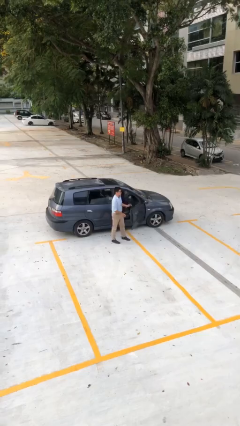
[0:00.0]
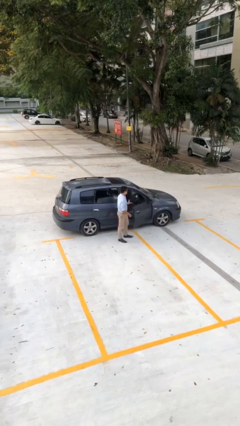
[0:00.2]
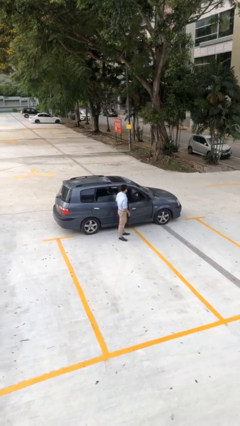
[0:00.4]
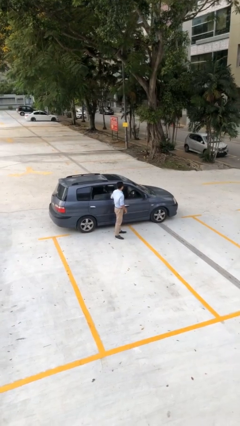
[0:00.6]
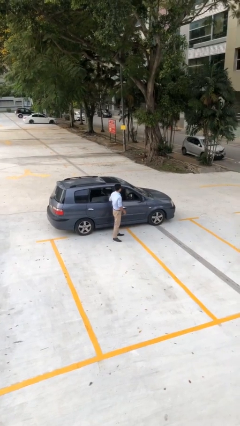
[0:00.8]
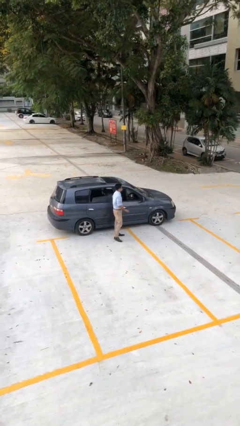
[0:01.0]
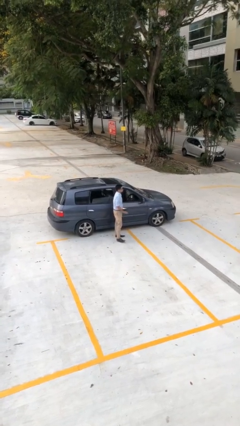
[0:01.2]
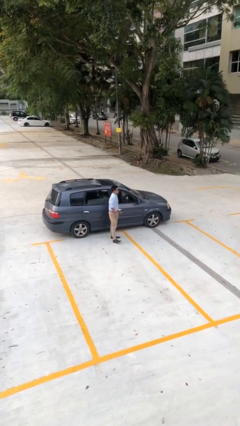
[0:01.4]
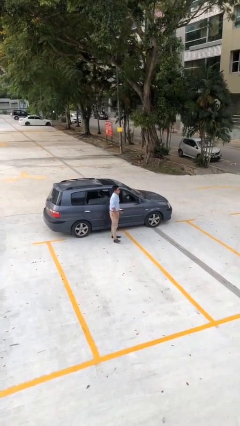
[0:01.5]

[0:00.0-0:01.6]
person closes car door

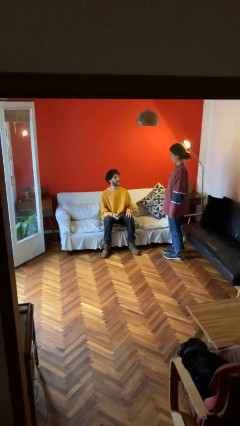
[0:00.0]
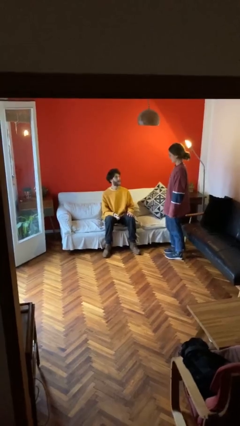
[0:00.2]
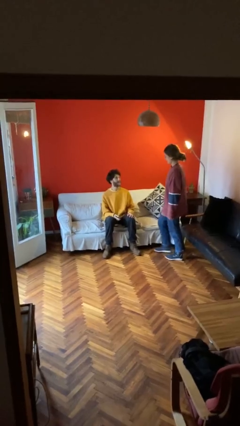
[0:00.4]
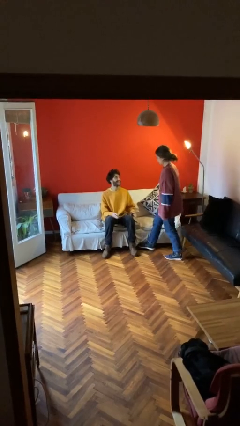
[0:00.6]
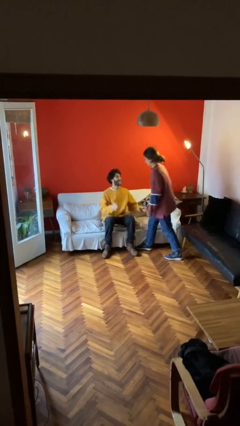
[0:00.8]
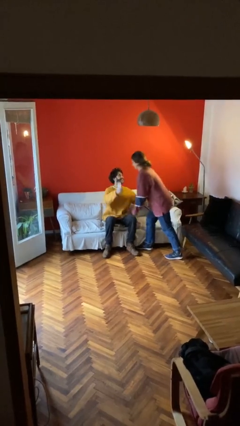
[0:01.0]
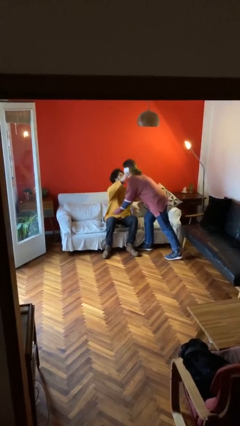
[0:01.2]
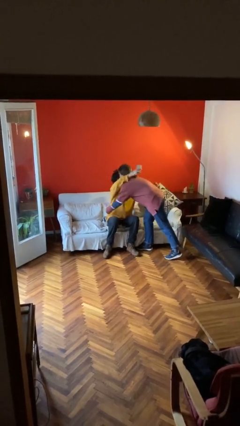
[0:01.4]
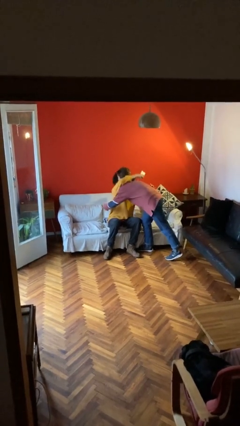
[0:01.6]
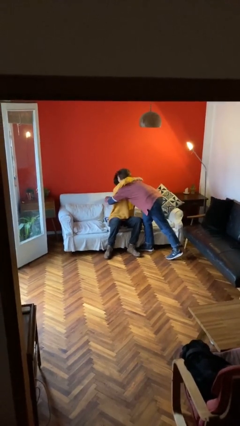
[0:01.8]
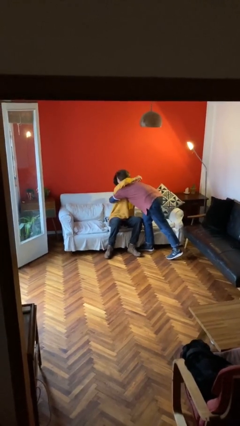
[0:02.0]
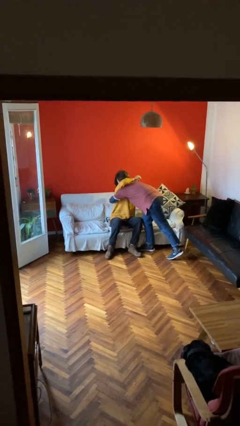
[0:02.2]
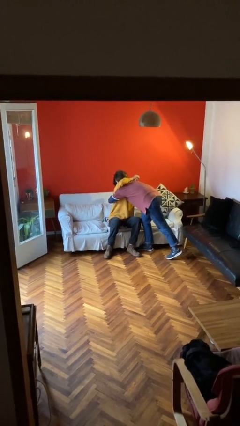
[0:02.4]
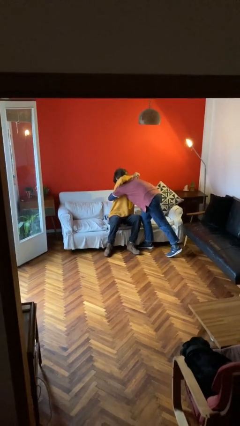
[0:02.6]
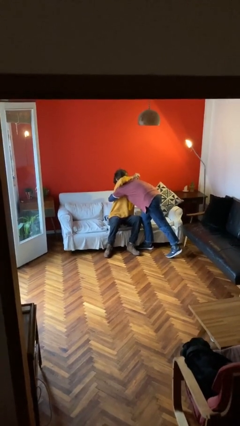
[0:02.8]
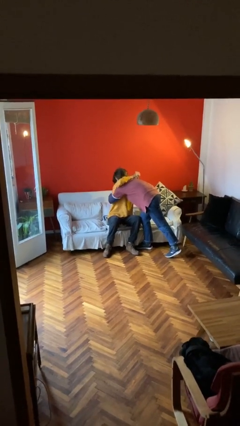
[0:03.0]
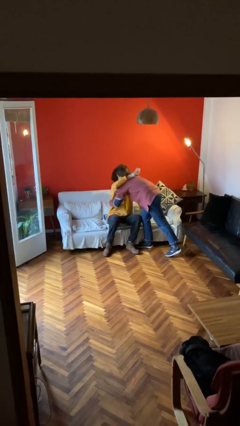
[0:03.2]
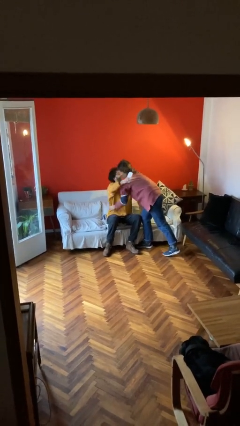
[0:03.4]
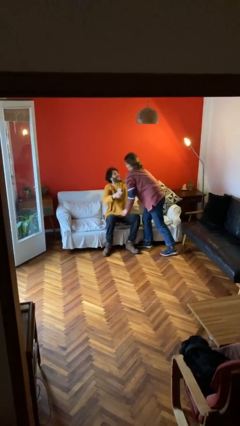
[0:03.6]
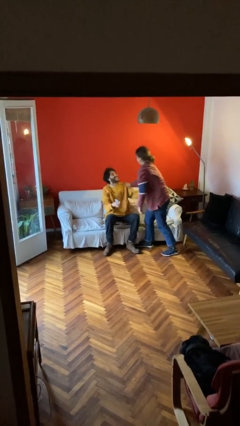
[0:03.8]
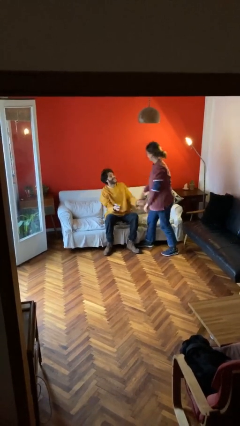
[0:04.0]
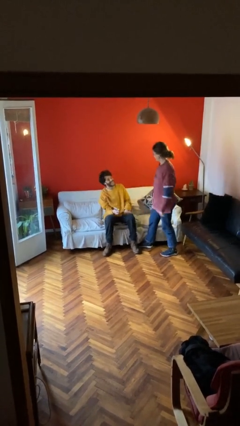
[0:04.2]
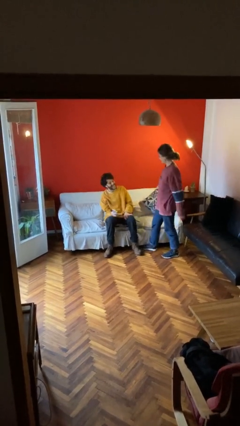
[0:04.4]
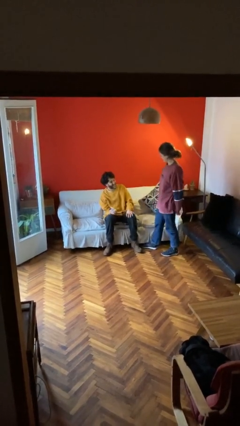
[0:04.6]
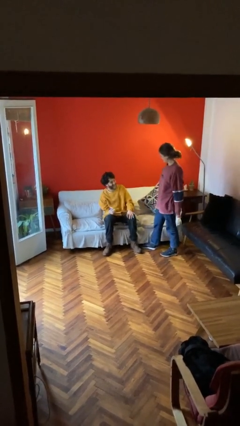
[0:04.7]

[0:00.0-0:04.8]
person embraces person

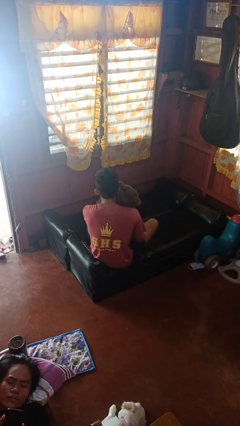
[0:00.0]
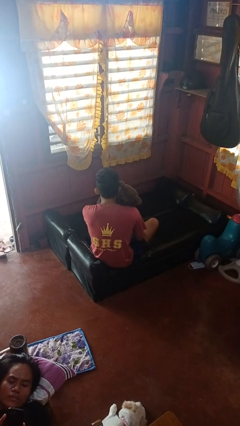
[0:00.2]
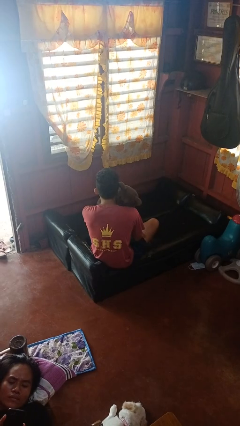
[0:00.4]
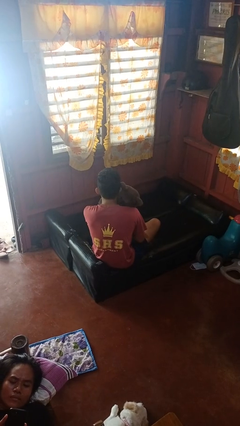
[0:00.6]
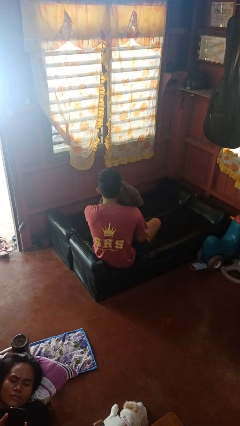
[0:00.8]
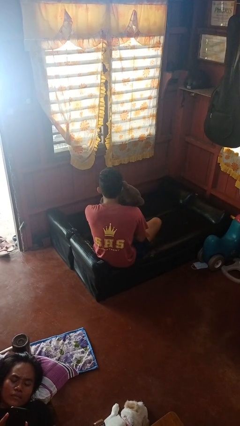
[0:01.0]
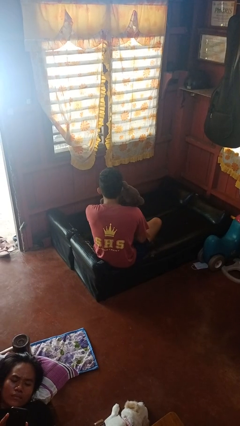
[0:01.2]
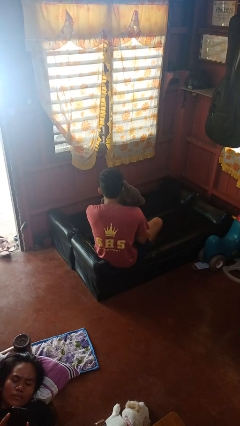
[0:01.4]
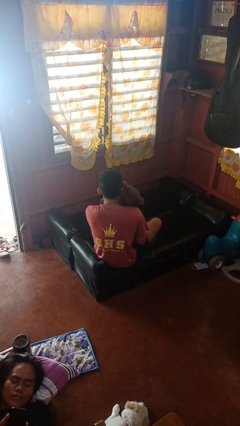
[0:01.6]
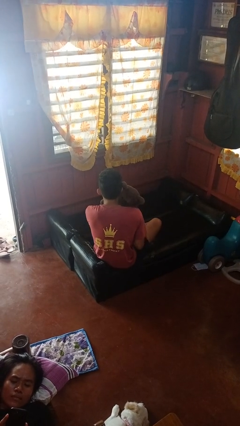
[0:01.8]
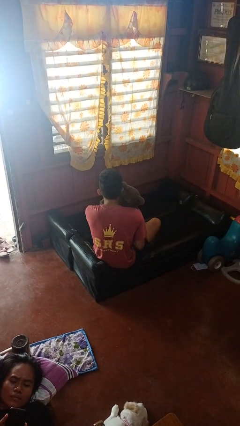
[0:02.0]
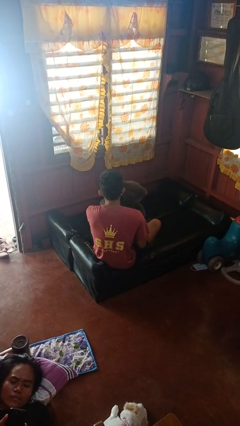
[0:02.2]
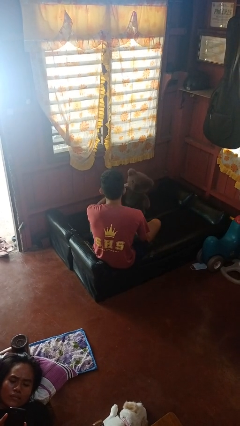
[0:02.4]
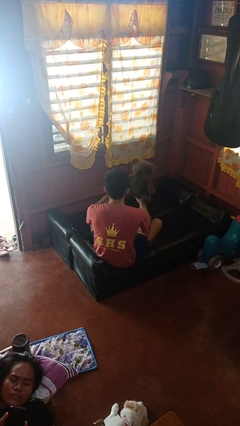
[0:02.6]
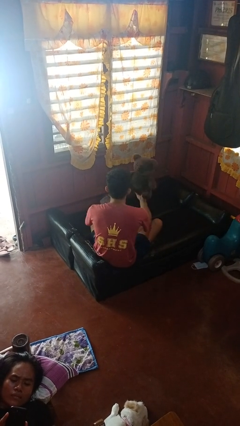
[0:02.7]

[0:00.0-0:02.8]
person hugs stuffed animal

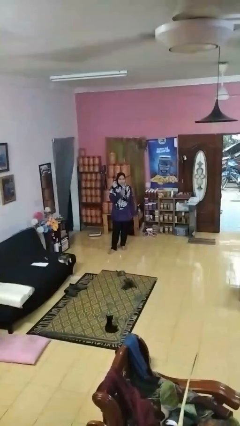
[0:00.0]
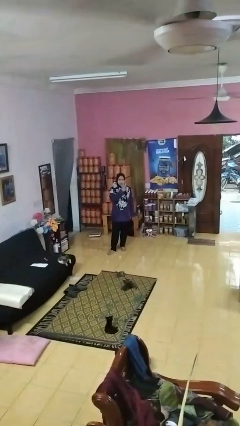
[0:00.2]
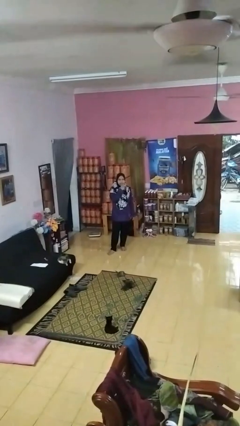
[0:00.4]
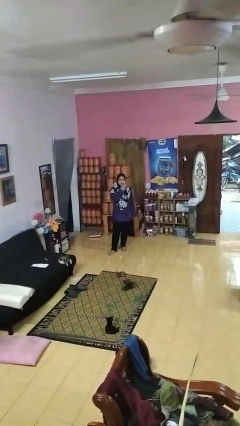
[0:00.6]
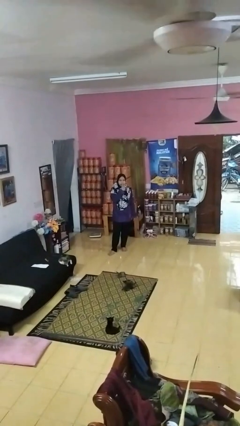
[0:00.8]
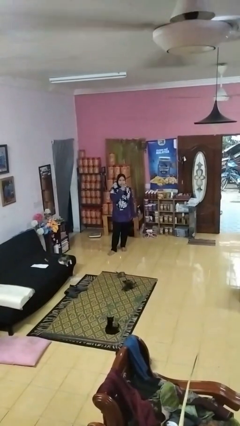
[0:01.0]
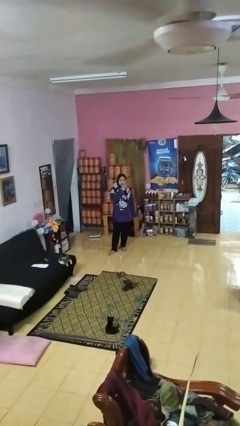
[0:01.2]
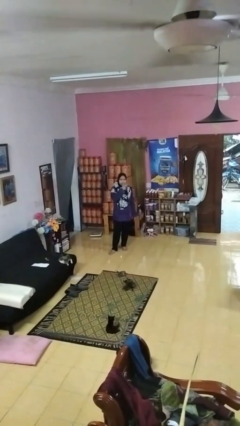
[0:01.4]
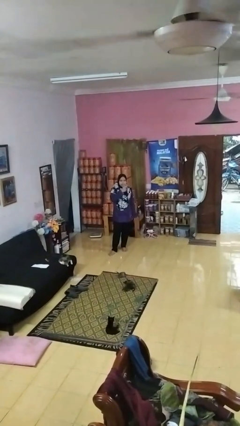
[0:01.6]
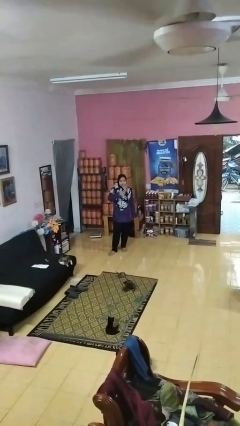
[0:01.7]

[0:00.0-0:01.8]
person gestures be quiet

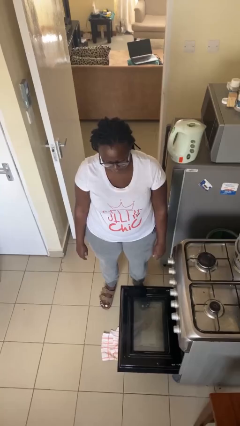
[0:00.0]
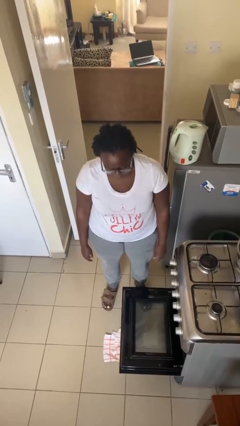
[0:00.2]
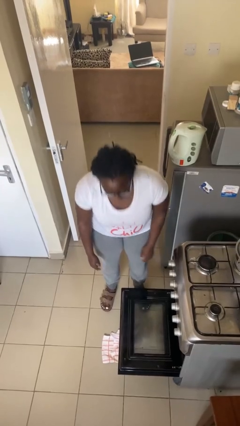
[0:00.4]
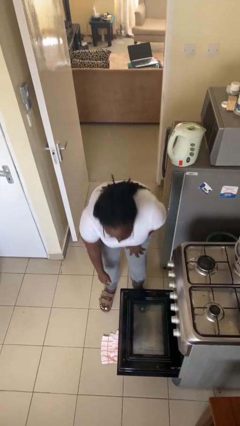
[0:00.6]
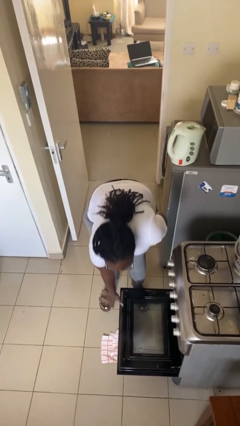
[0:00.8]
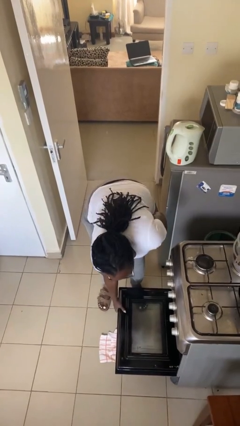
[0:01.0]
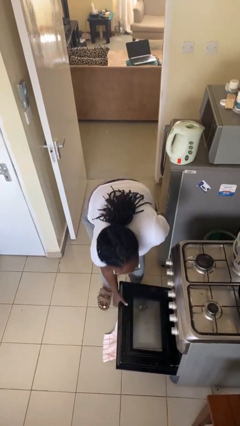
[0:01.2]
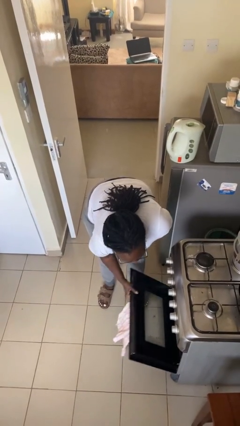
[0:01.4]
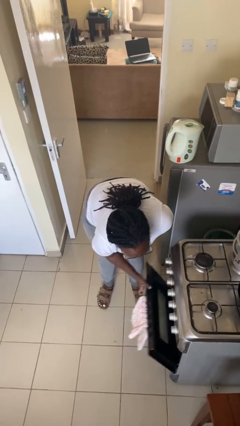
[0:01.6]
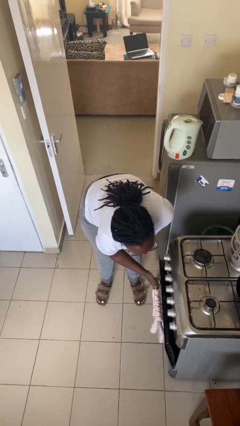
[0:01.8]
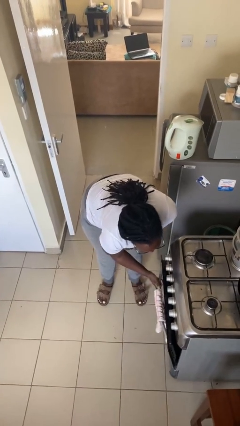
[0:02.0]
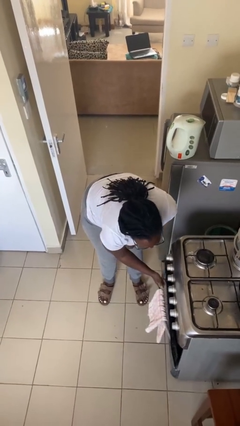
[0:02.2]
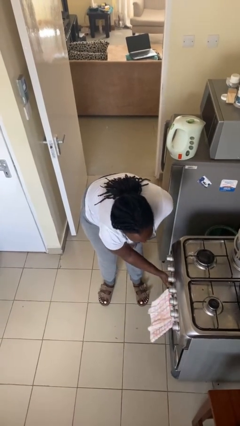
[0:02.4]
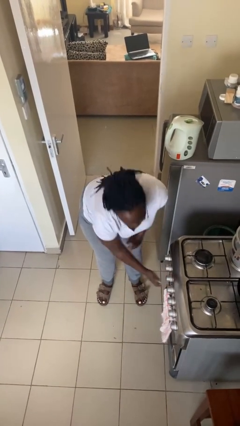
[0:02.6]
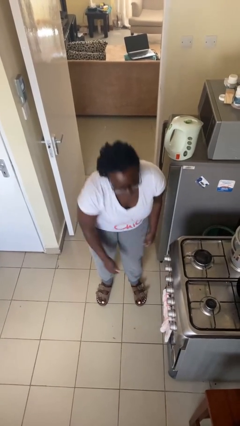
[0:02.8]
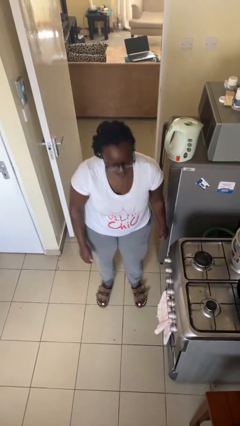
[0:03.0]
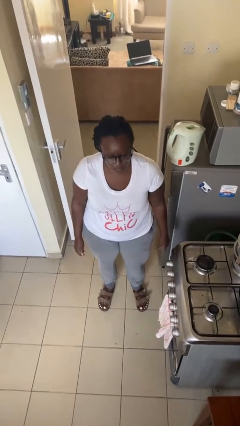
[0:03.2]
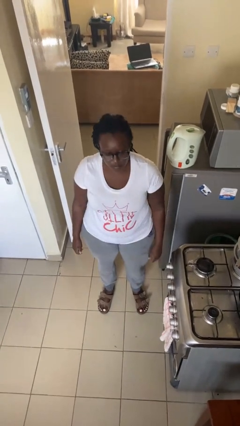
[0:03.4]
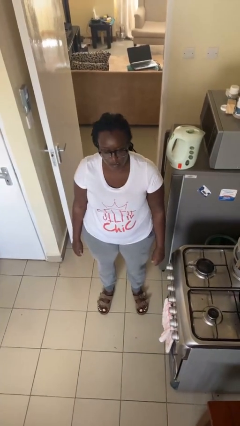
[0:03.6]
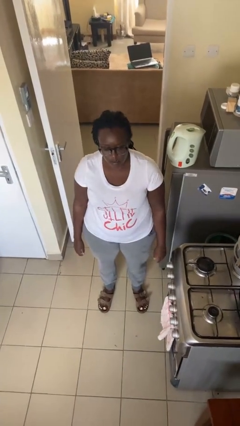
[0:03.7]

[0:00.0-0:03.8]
person closes oven door

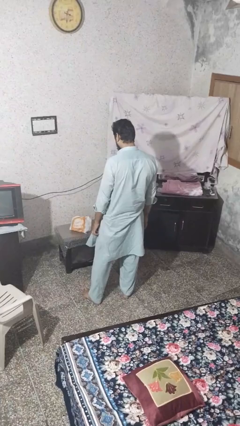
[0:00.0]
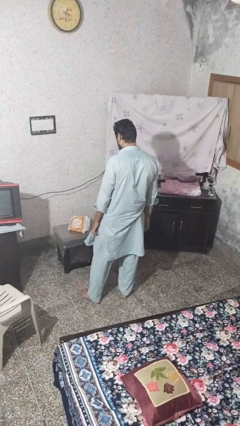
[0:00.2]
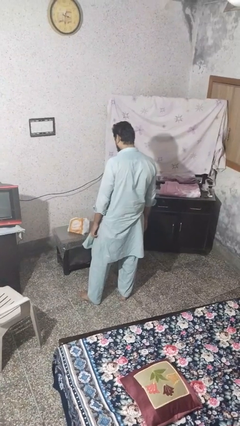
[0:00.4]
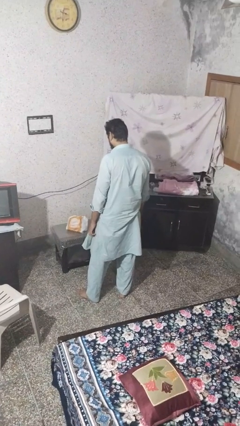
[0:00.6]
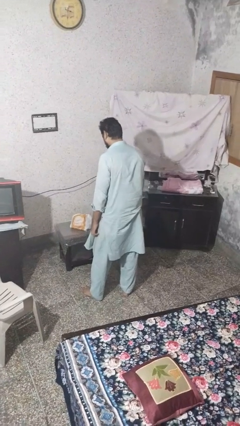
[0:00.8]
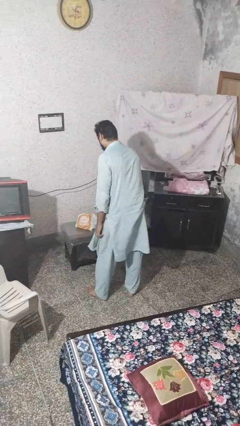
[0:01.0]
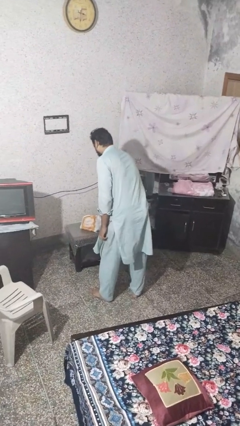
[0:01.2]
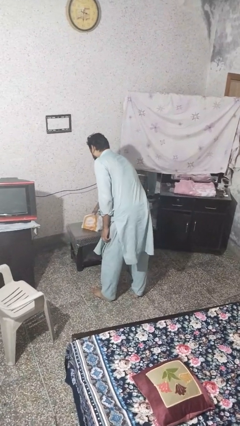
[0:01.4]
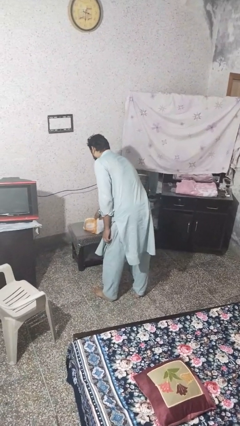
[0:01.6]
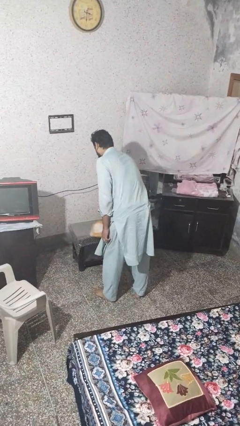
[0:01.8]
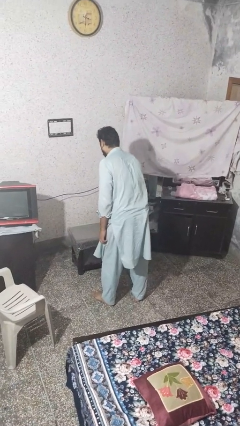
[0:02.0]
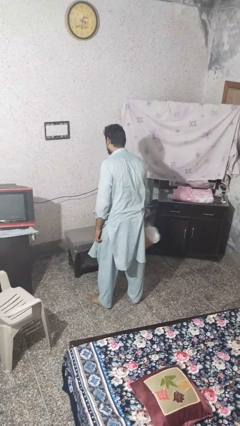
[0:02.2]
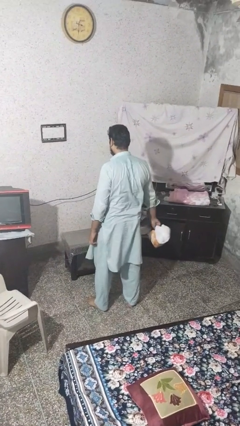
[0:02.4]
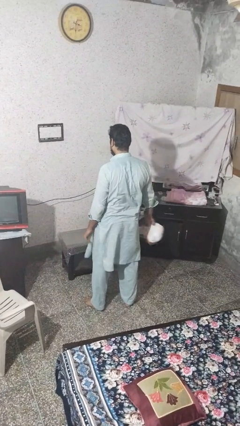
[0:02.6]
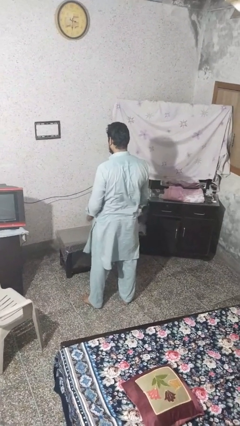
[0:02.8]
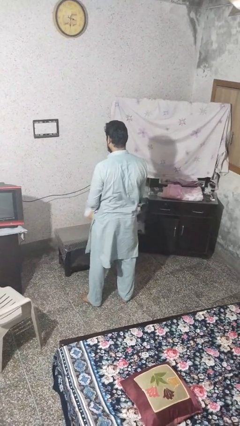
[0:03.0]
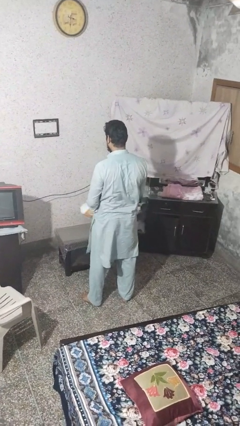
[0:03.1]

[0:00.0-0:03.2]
person picks up object from table
